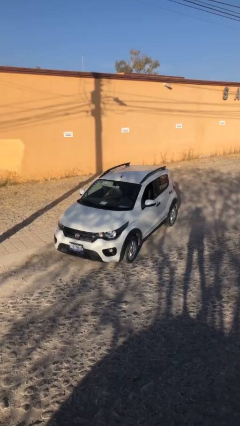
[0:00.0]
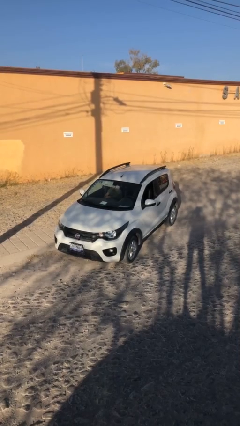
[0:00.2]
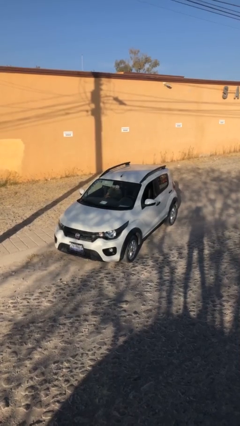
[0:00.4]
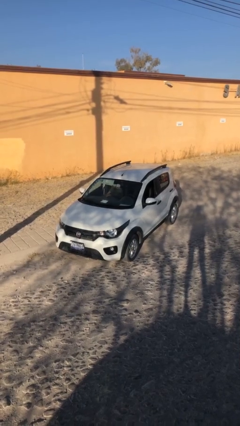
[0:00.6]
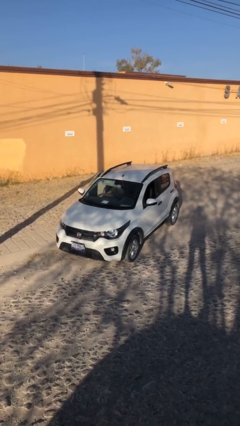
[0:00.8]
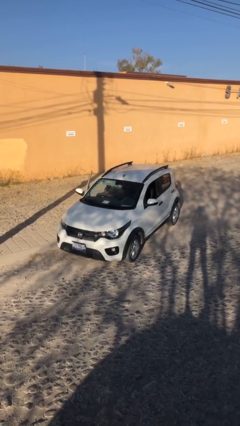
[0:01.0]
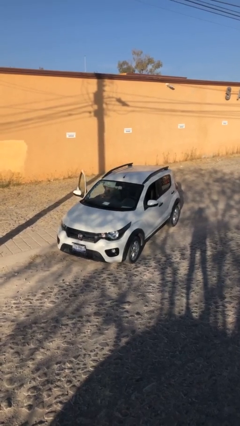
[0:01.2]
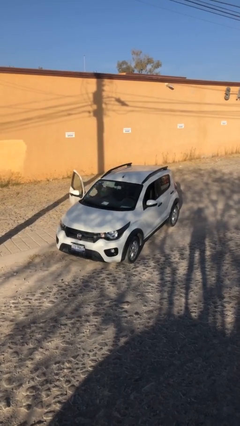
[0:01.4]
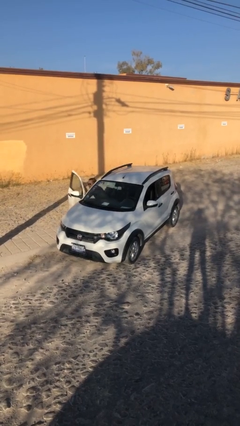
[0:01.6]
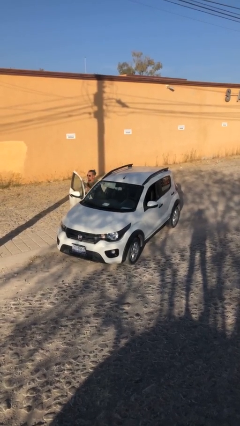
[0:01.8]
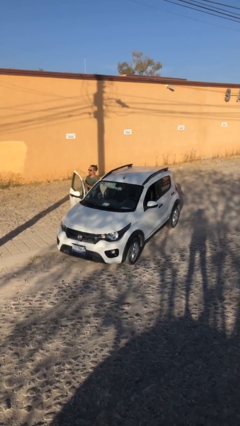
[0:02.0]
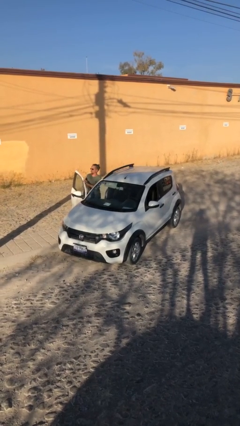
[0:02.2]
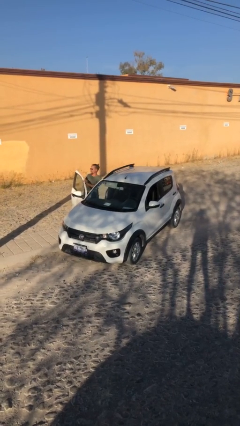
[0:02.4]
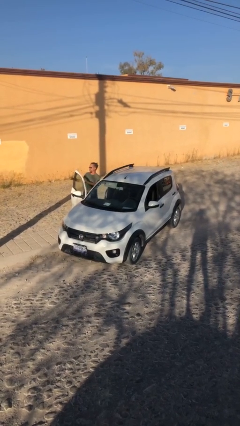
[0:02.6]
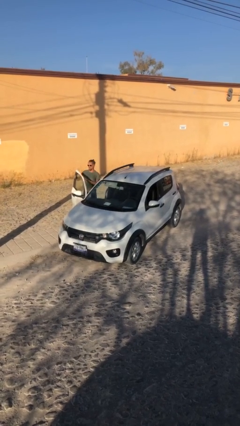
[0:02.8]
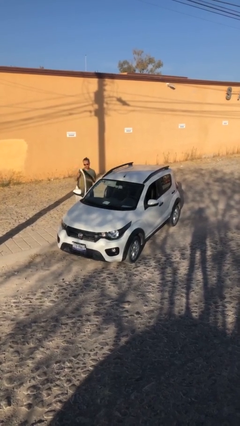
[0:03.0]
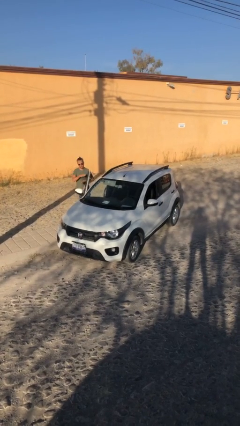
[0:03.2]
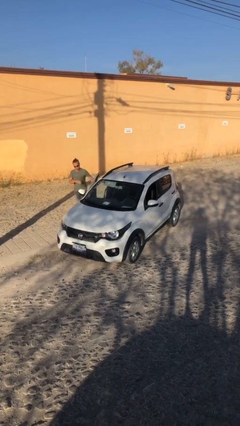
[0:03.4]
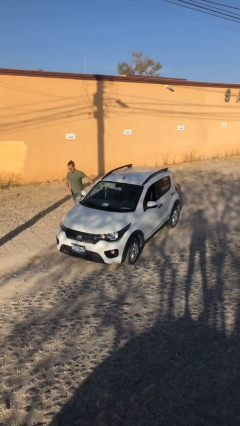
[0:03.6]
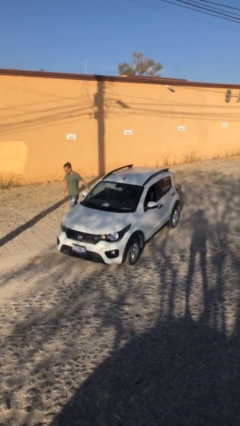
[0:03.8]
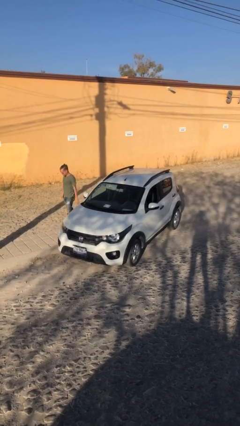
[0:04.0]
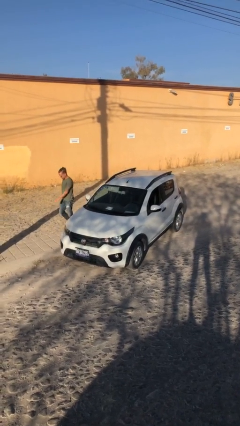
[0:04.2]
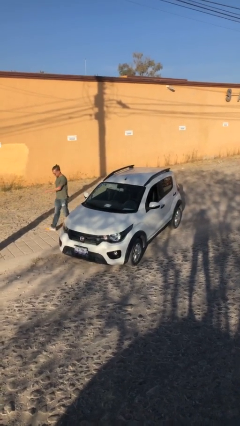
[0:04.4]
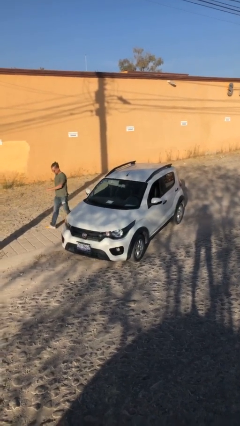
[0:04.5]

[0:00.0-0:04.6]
car drops off person

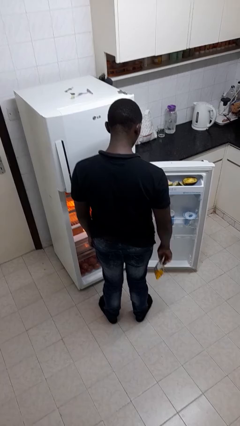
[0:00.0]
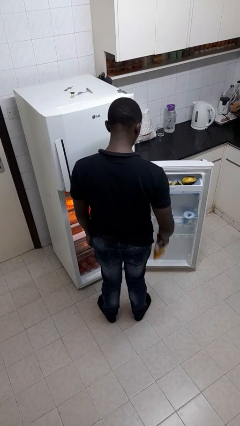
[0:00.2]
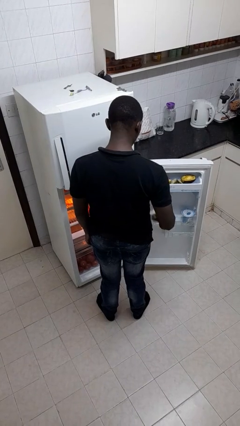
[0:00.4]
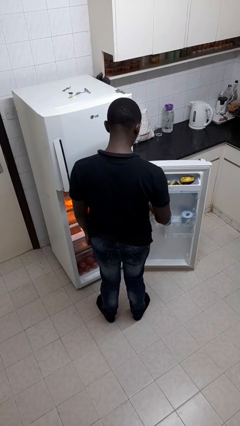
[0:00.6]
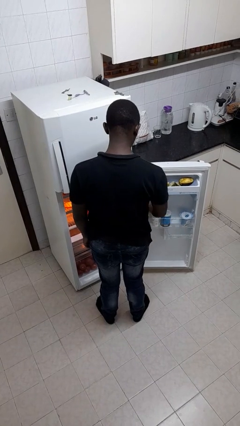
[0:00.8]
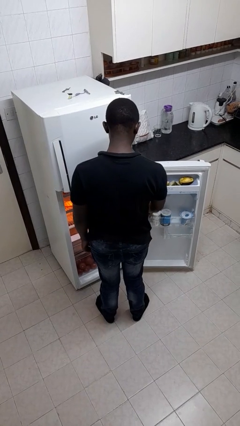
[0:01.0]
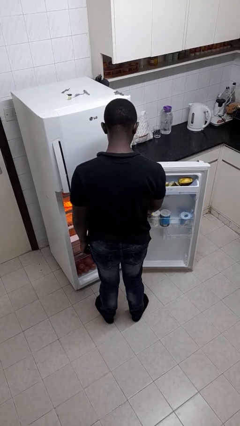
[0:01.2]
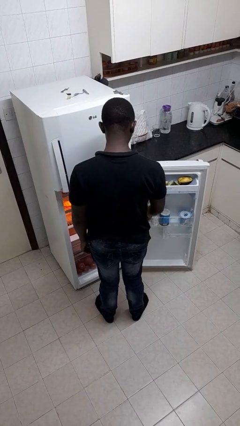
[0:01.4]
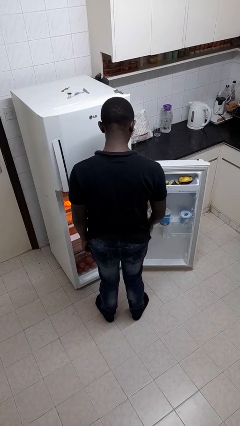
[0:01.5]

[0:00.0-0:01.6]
person puts object into refrigerator

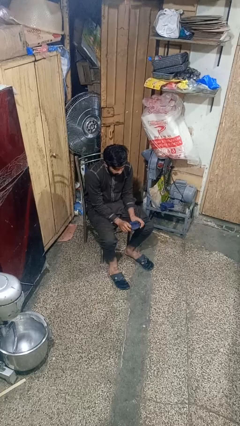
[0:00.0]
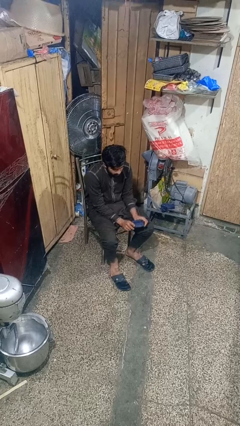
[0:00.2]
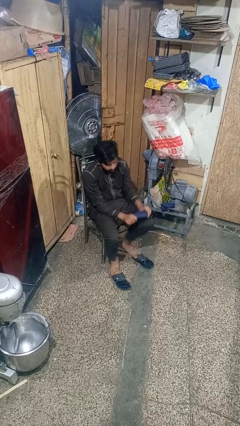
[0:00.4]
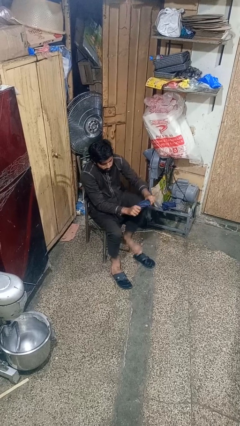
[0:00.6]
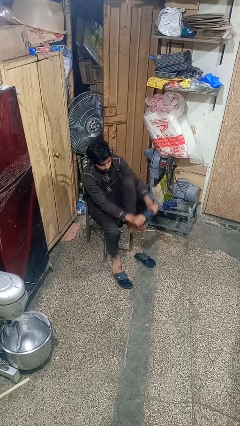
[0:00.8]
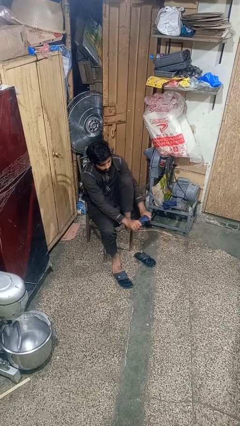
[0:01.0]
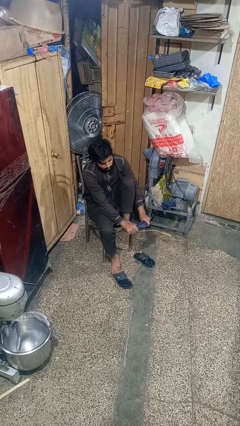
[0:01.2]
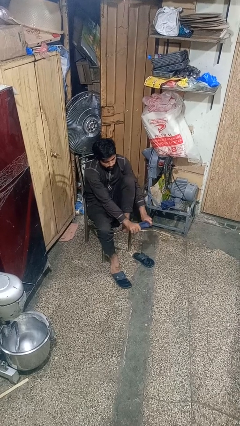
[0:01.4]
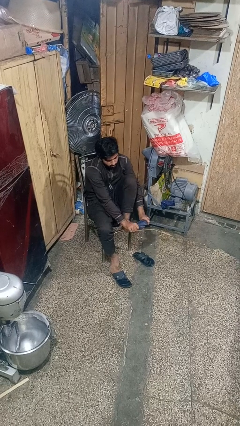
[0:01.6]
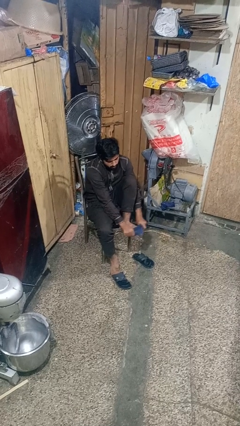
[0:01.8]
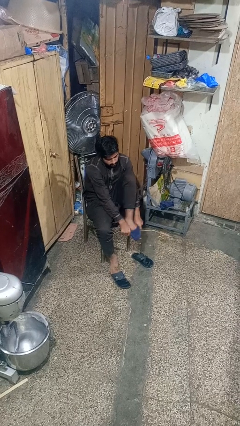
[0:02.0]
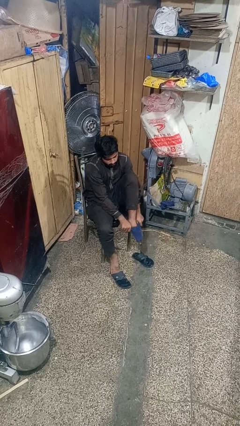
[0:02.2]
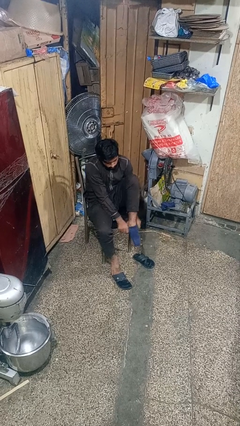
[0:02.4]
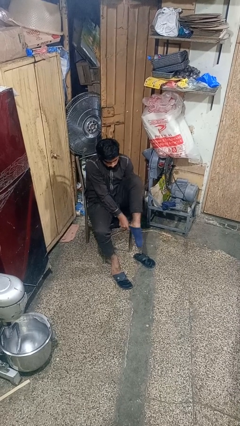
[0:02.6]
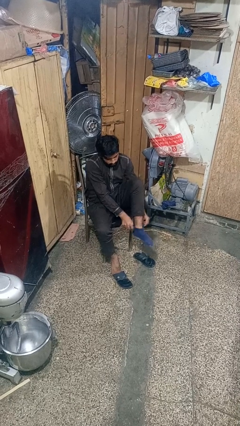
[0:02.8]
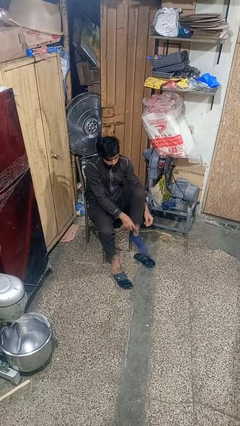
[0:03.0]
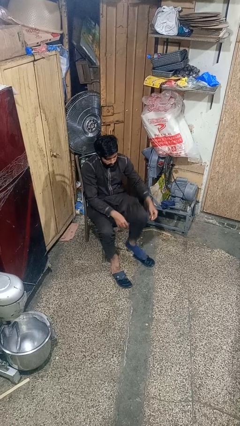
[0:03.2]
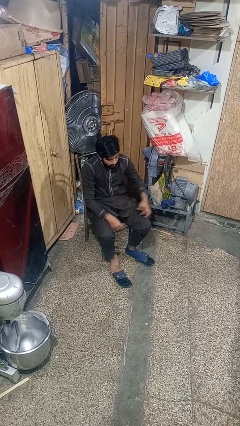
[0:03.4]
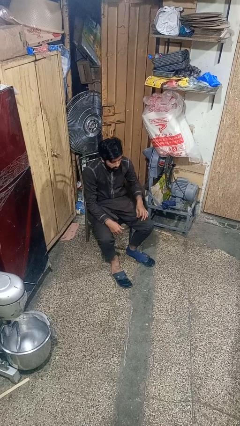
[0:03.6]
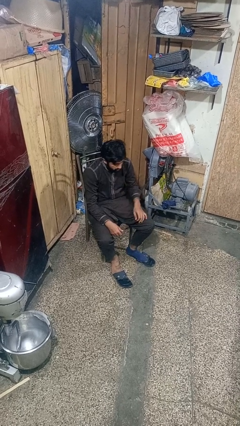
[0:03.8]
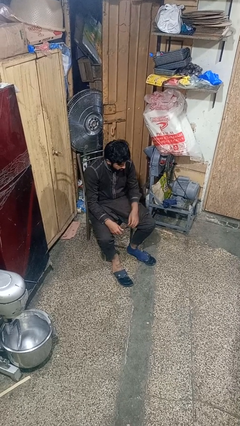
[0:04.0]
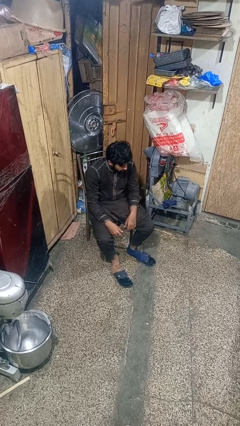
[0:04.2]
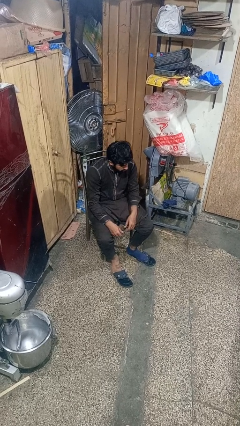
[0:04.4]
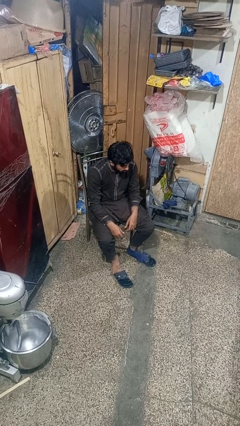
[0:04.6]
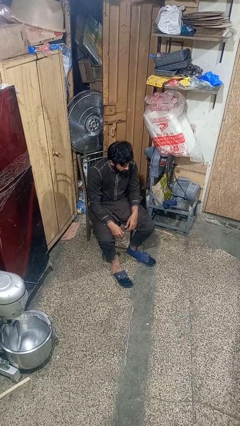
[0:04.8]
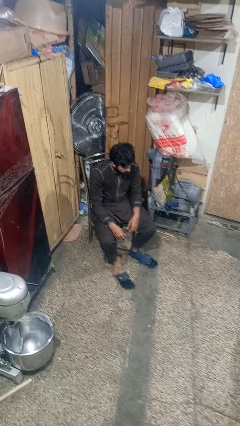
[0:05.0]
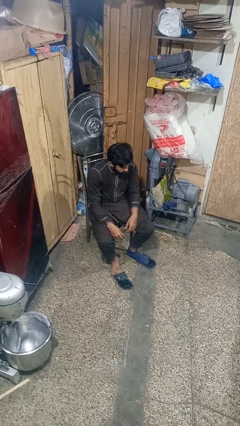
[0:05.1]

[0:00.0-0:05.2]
person puts on socks

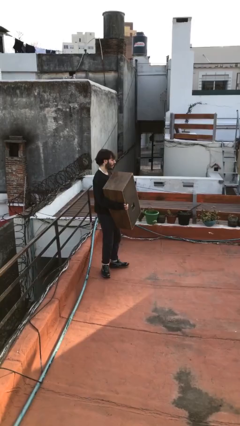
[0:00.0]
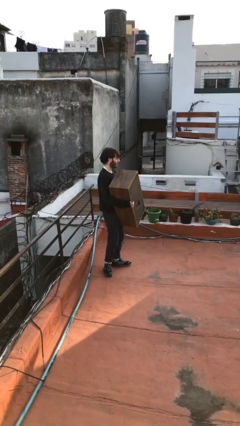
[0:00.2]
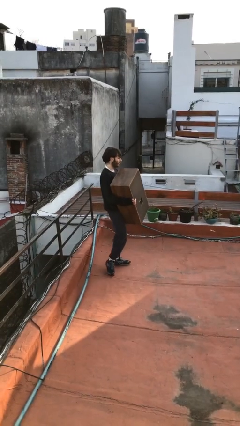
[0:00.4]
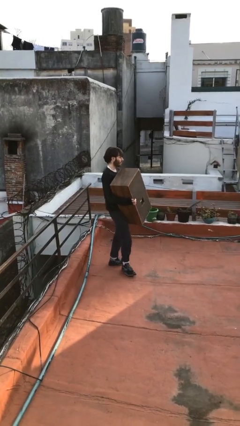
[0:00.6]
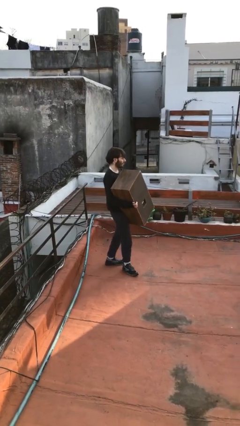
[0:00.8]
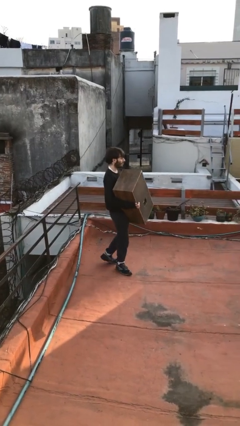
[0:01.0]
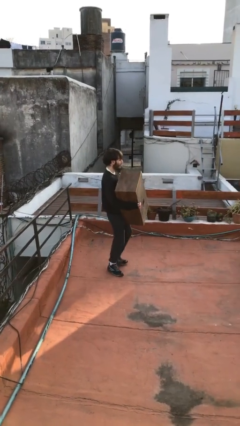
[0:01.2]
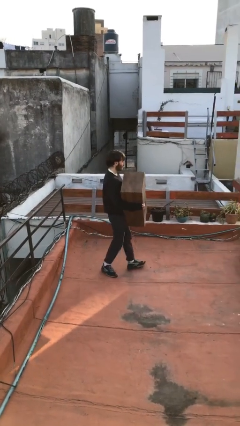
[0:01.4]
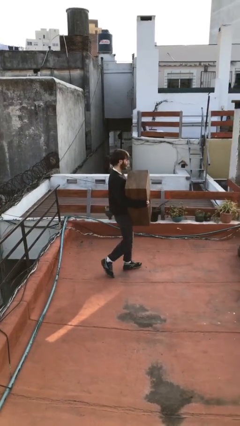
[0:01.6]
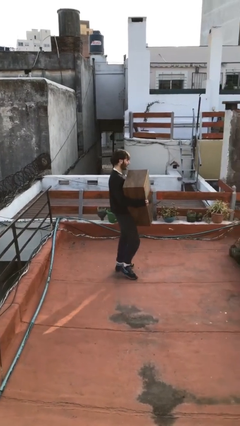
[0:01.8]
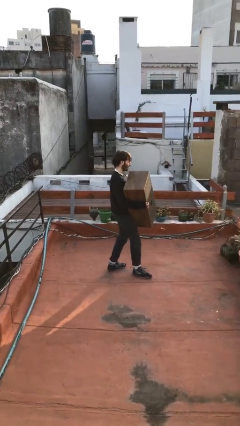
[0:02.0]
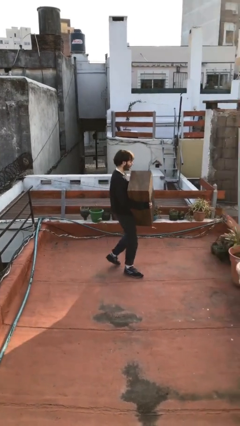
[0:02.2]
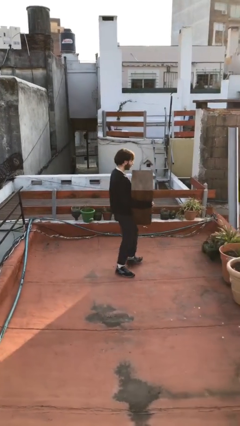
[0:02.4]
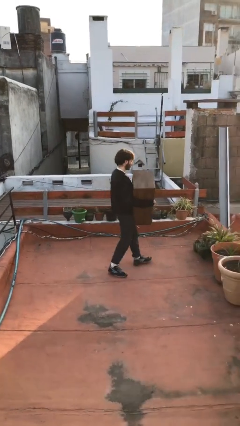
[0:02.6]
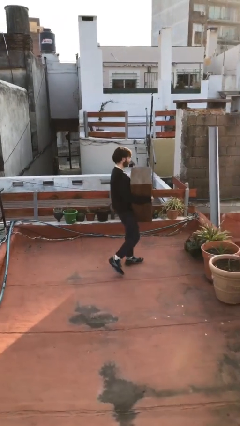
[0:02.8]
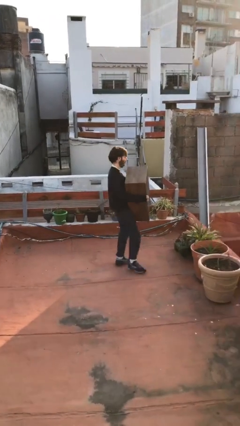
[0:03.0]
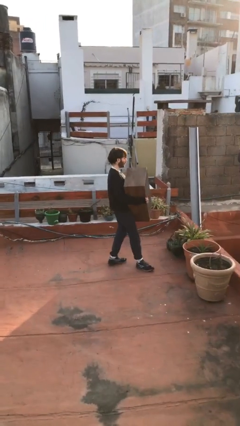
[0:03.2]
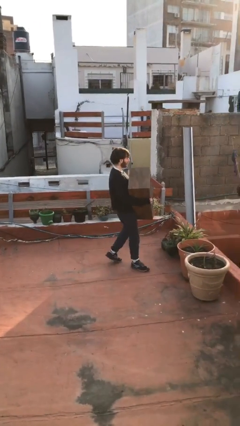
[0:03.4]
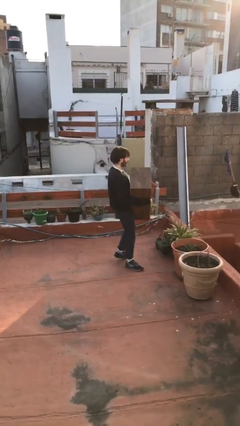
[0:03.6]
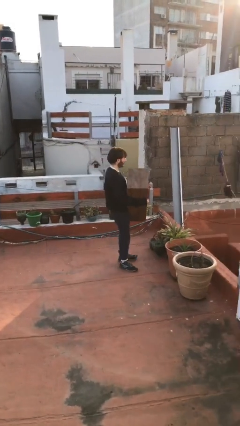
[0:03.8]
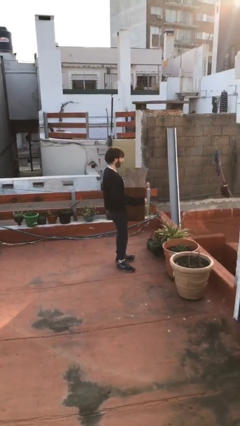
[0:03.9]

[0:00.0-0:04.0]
person carries furniture

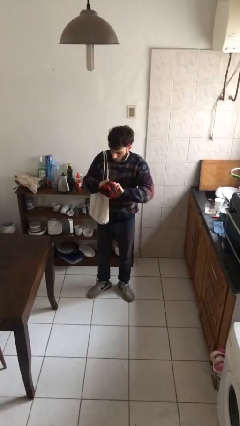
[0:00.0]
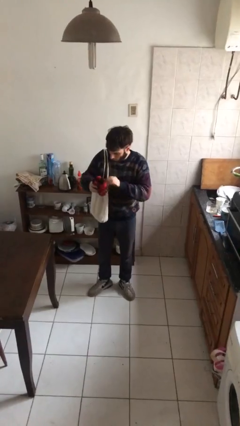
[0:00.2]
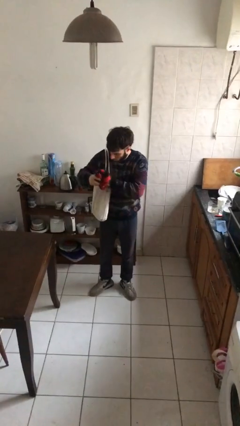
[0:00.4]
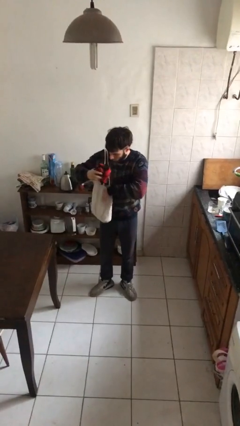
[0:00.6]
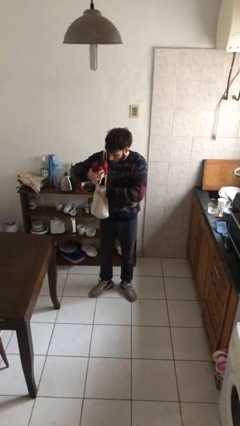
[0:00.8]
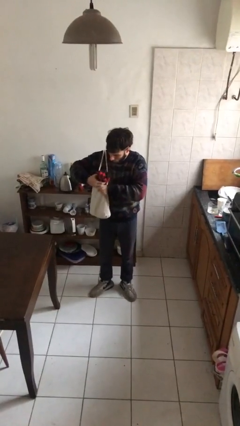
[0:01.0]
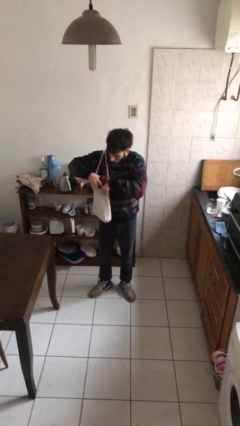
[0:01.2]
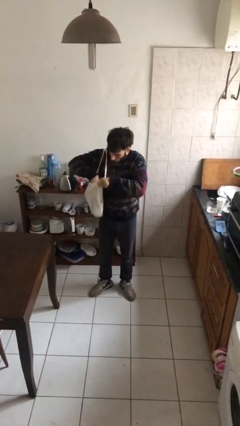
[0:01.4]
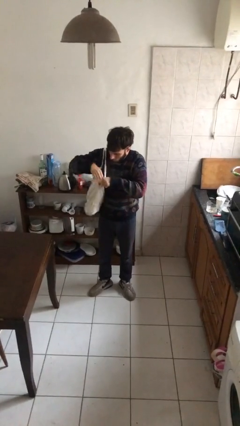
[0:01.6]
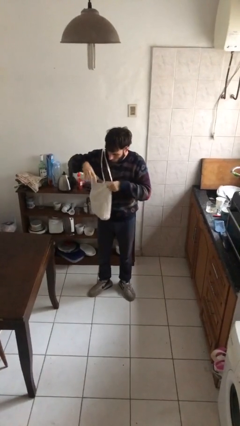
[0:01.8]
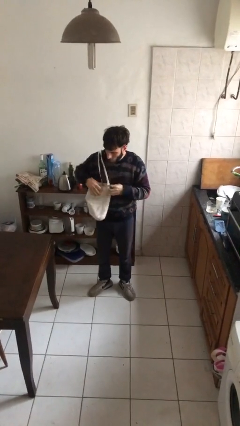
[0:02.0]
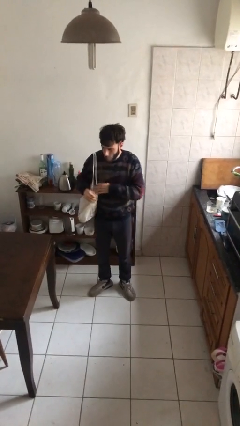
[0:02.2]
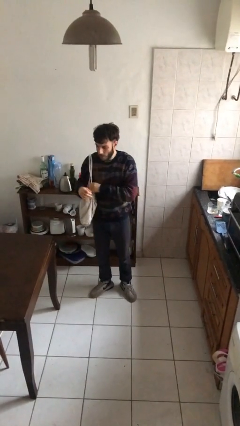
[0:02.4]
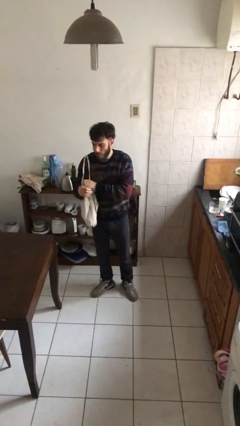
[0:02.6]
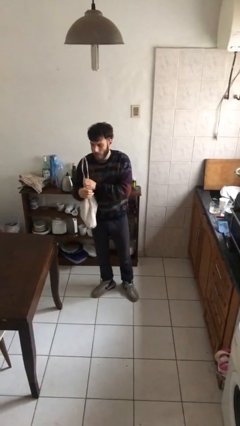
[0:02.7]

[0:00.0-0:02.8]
person puts object into purse
